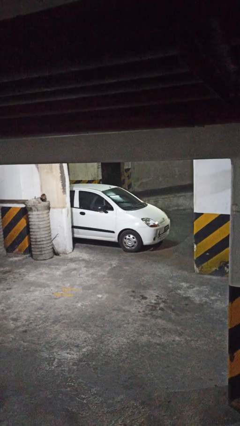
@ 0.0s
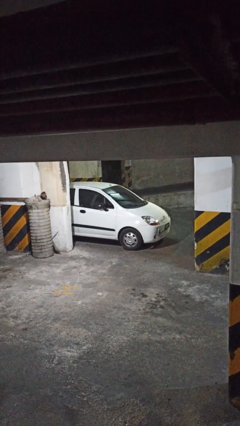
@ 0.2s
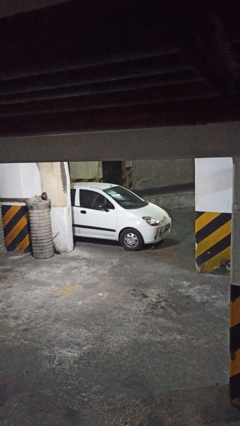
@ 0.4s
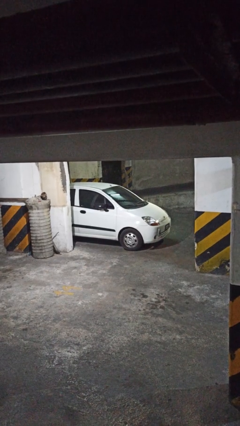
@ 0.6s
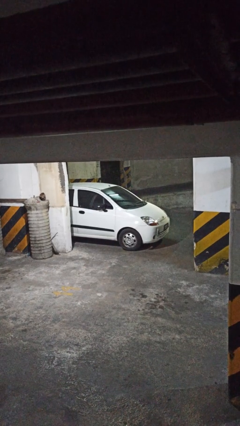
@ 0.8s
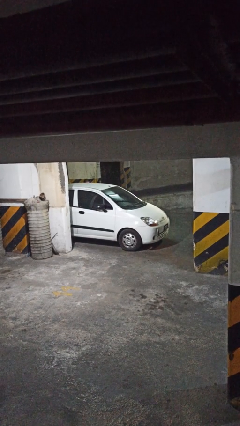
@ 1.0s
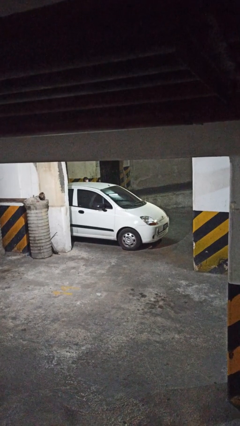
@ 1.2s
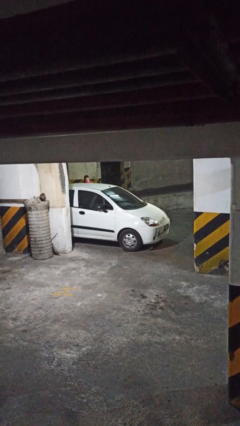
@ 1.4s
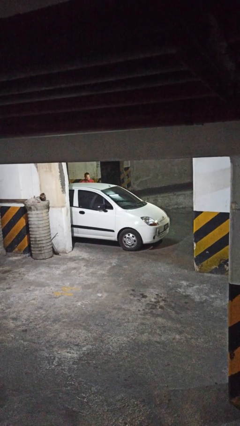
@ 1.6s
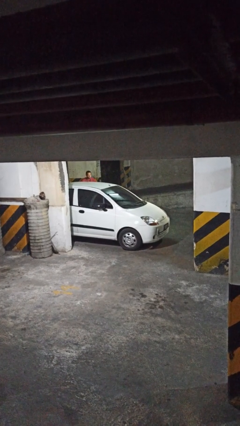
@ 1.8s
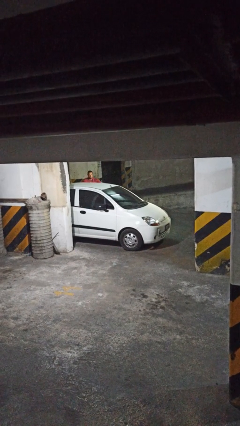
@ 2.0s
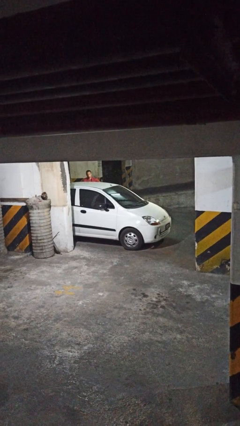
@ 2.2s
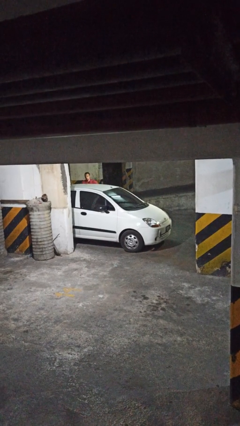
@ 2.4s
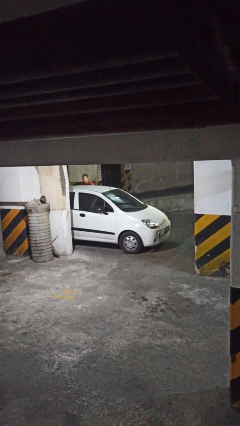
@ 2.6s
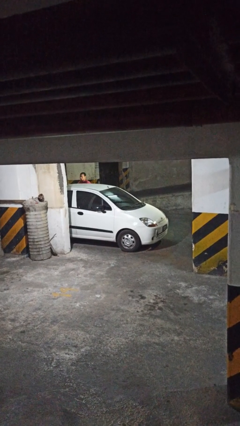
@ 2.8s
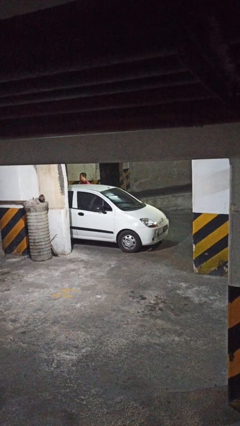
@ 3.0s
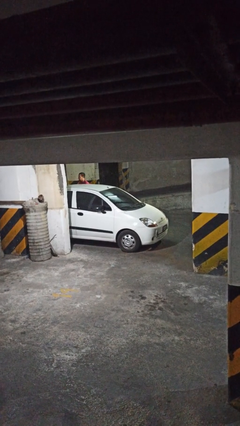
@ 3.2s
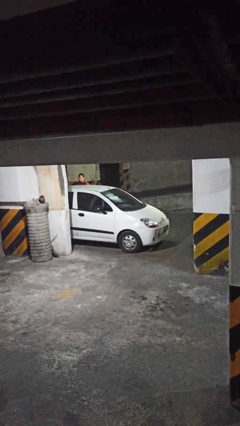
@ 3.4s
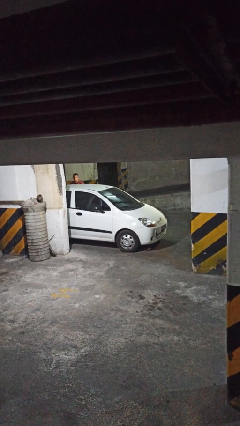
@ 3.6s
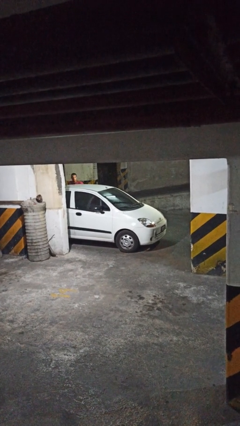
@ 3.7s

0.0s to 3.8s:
car drops off person

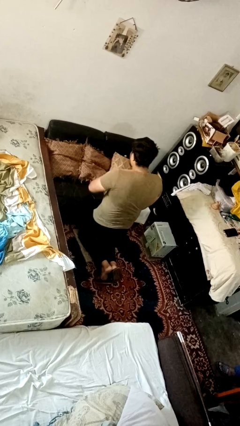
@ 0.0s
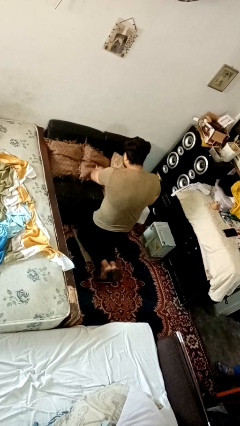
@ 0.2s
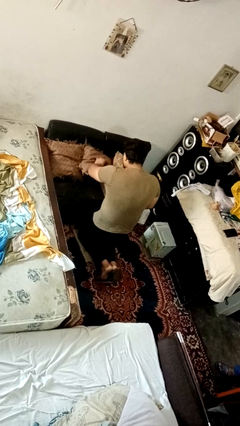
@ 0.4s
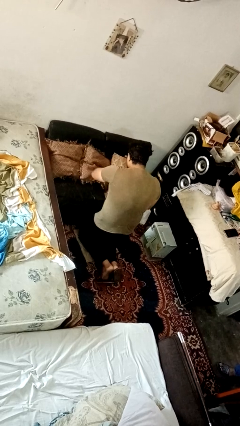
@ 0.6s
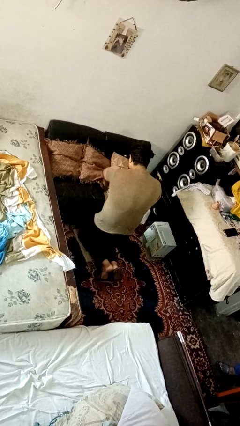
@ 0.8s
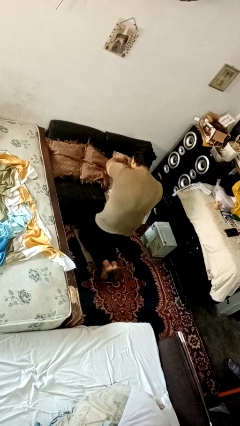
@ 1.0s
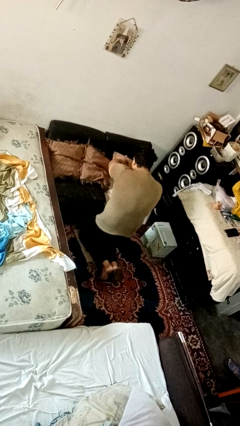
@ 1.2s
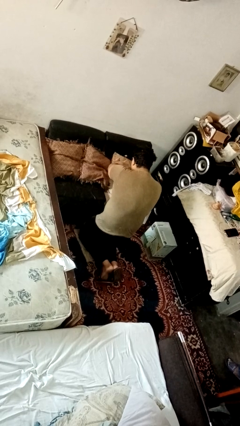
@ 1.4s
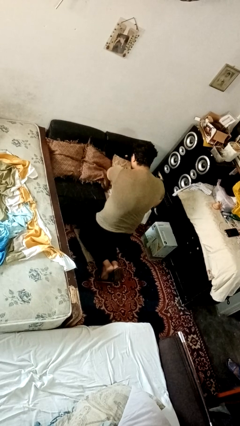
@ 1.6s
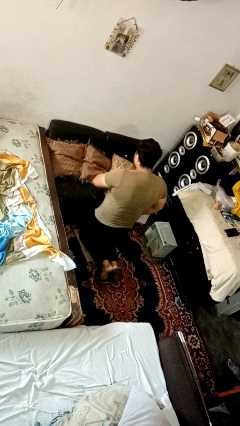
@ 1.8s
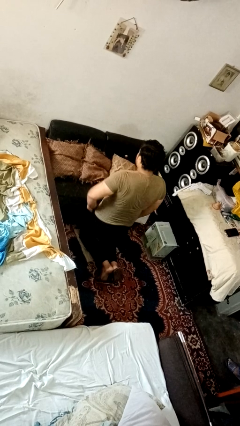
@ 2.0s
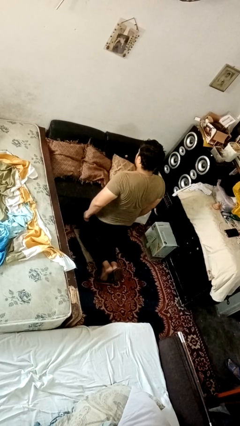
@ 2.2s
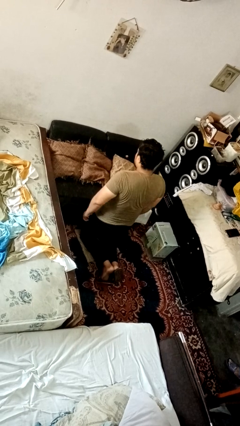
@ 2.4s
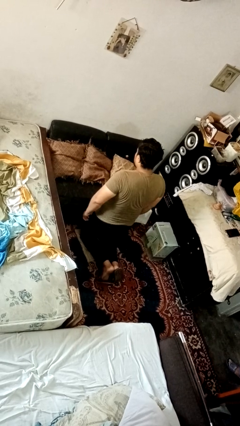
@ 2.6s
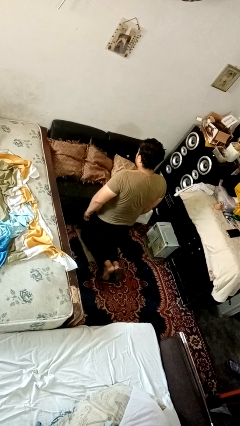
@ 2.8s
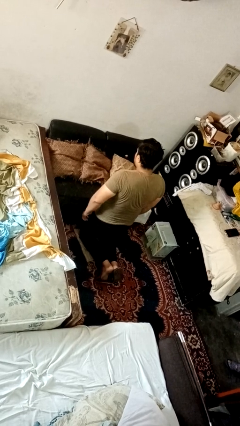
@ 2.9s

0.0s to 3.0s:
person searches in couch

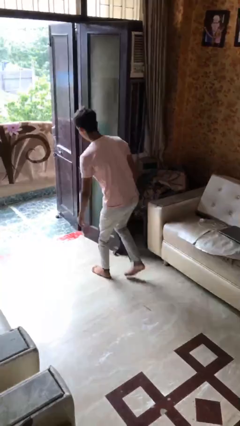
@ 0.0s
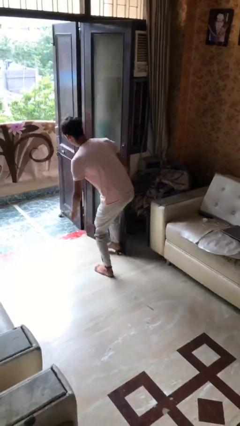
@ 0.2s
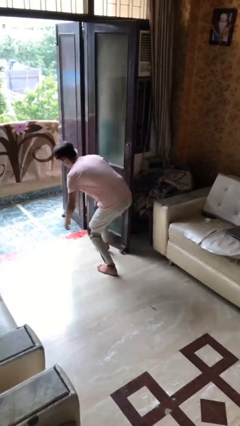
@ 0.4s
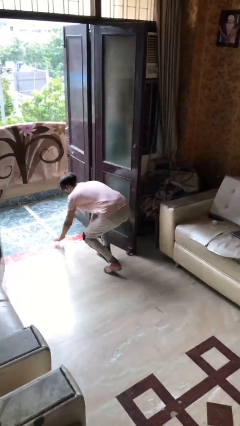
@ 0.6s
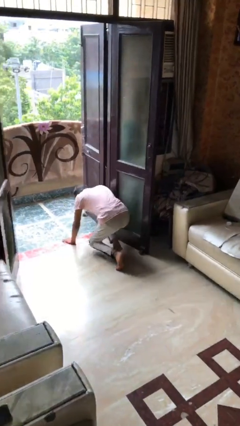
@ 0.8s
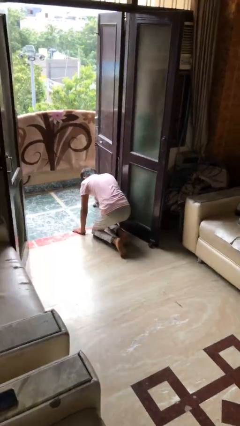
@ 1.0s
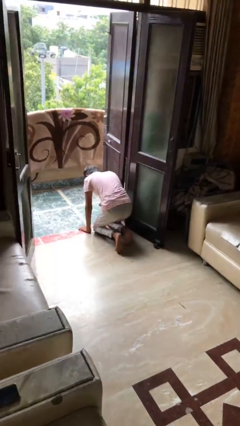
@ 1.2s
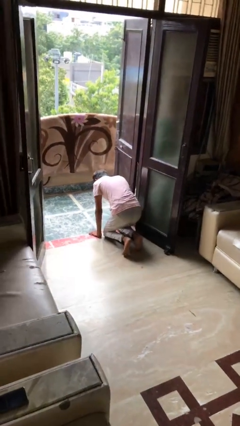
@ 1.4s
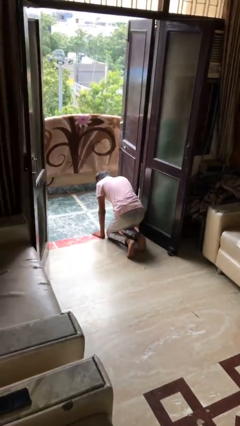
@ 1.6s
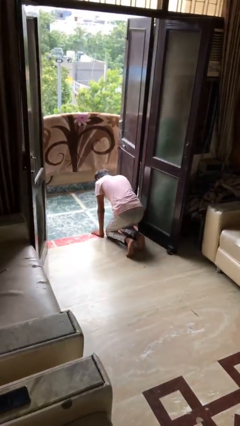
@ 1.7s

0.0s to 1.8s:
person trips on object on floor

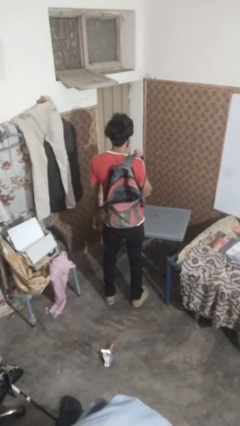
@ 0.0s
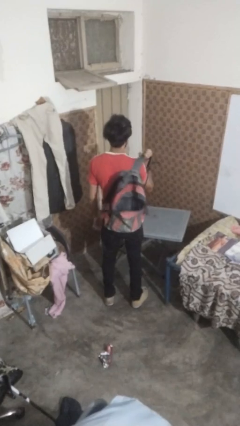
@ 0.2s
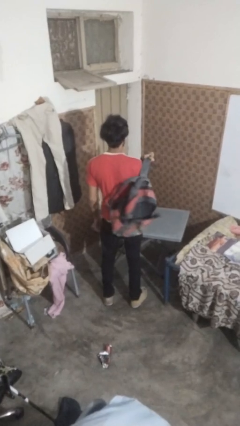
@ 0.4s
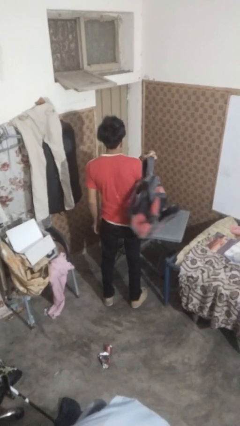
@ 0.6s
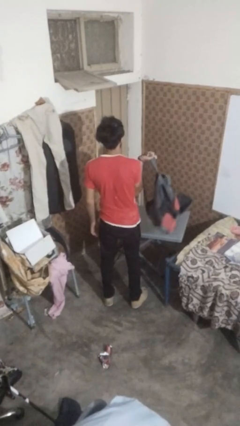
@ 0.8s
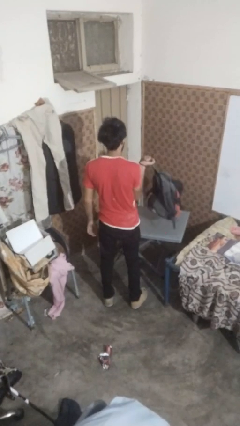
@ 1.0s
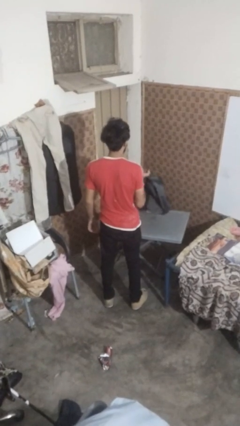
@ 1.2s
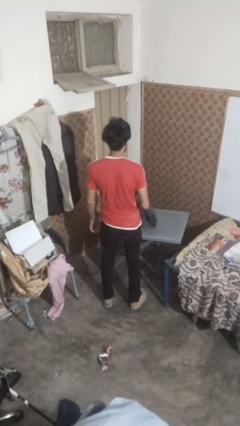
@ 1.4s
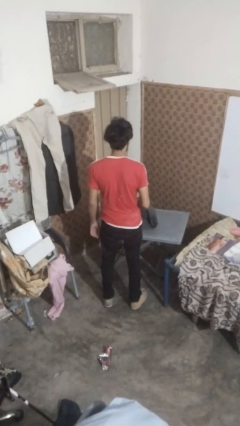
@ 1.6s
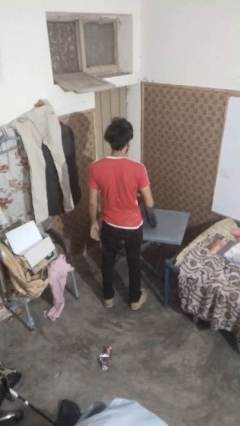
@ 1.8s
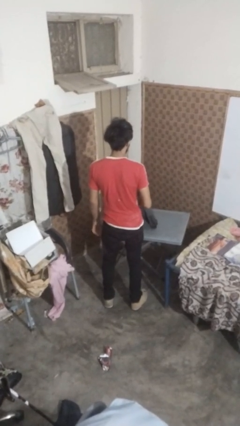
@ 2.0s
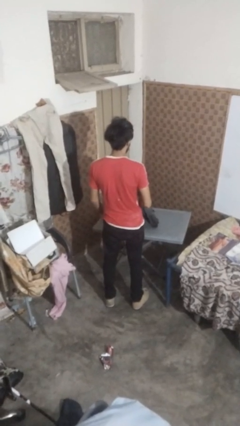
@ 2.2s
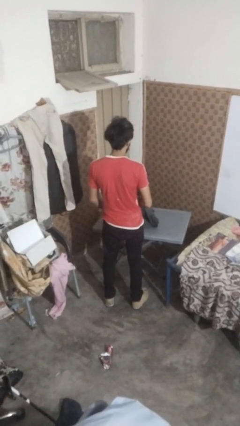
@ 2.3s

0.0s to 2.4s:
person takes off backpack

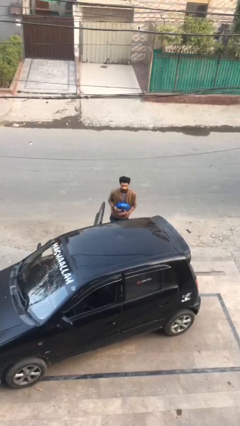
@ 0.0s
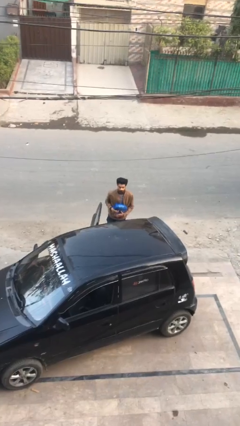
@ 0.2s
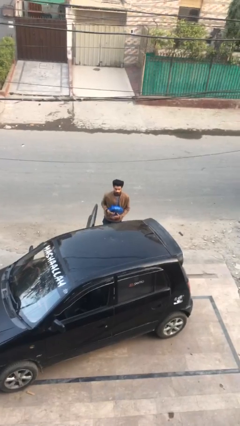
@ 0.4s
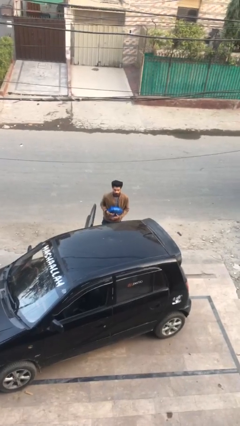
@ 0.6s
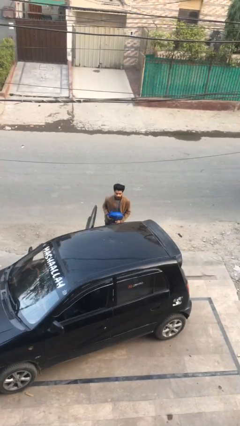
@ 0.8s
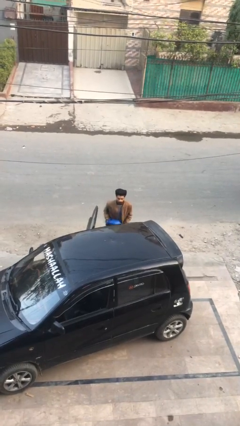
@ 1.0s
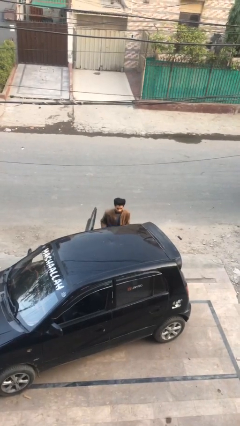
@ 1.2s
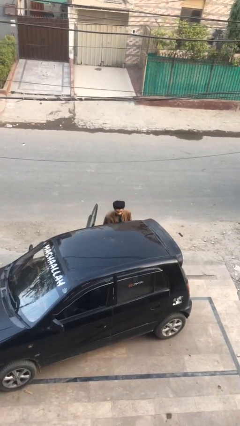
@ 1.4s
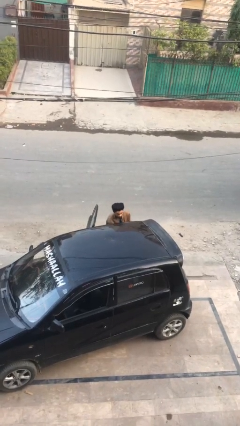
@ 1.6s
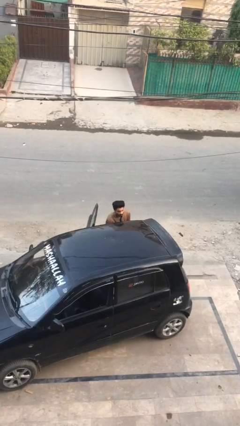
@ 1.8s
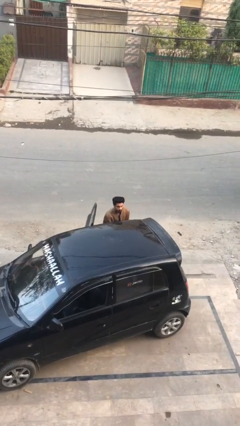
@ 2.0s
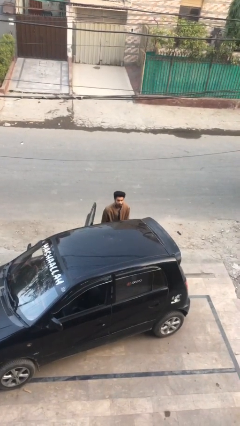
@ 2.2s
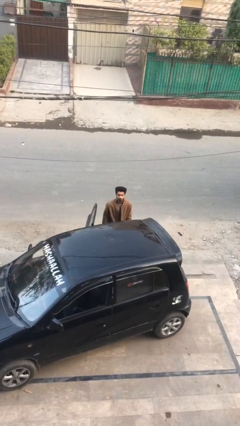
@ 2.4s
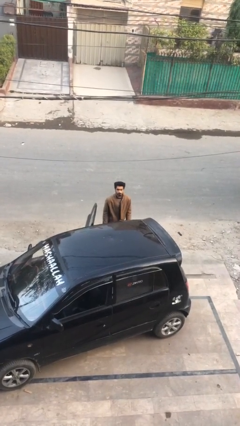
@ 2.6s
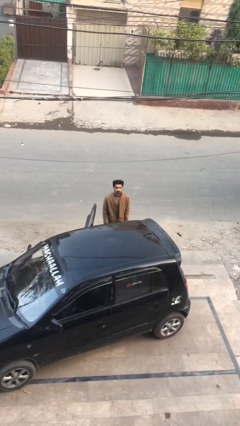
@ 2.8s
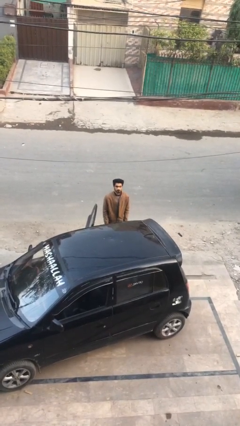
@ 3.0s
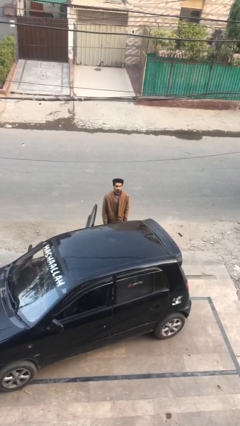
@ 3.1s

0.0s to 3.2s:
person loads car

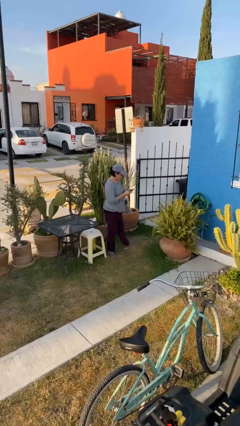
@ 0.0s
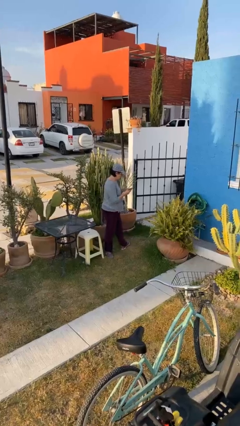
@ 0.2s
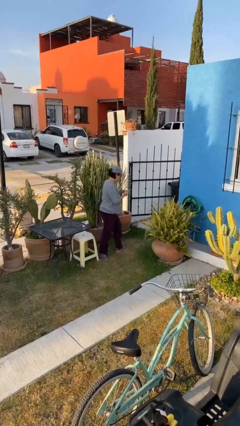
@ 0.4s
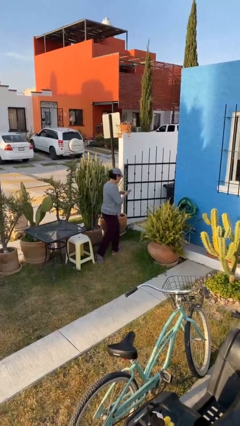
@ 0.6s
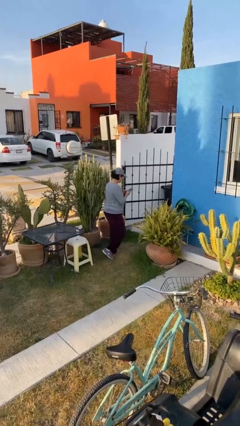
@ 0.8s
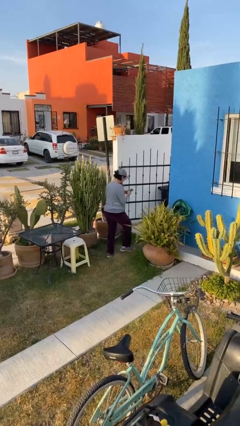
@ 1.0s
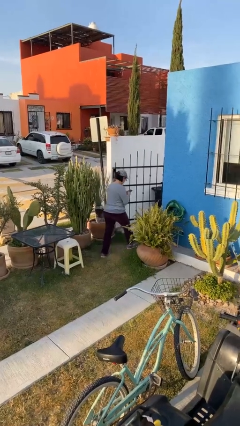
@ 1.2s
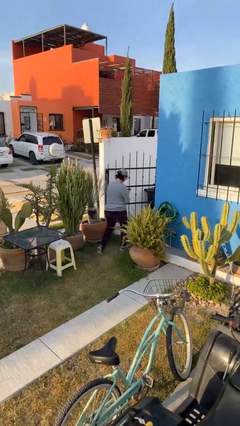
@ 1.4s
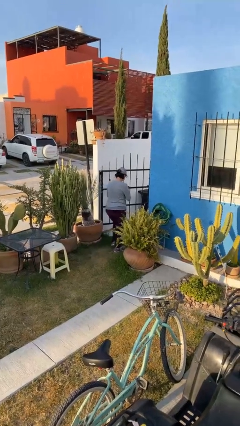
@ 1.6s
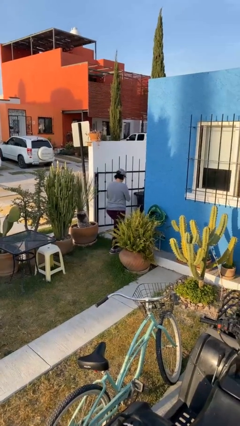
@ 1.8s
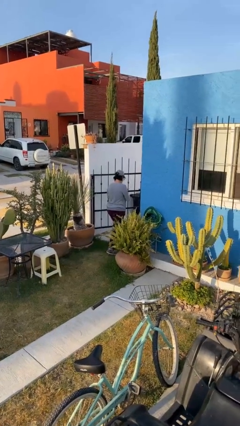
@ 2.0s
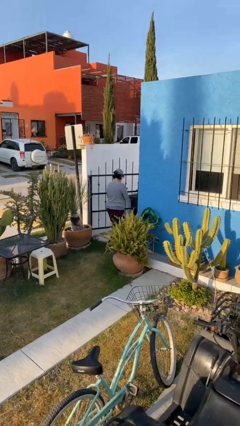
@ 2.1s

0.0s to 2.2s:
person exits scene through structure

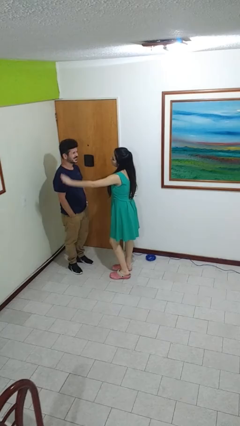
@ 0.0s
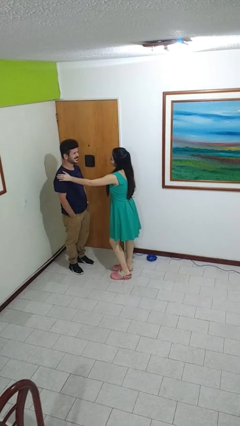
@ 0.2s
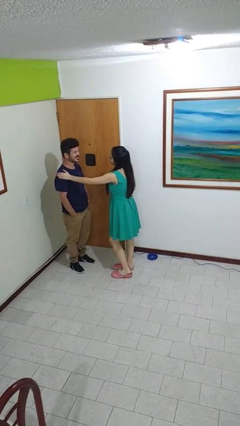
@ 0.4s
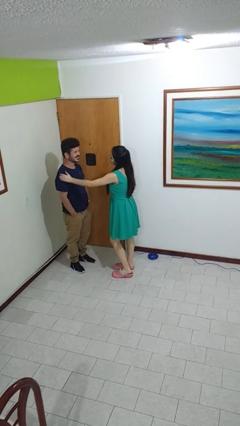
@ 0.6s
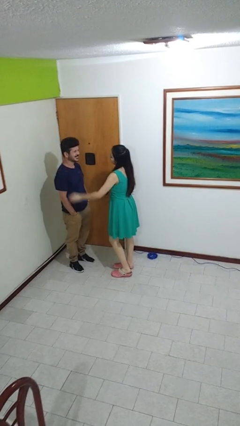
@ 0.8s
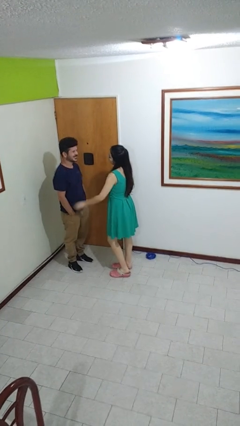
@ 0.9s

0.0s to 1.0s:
person pounds shoulders of person
